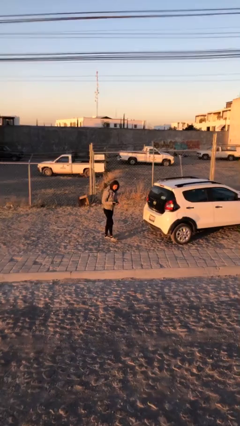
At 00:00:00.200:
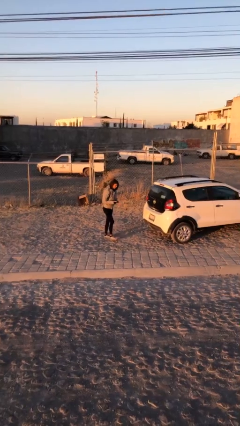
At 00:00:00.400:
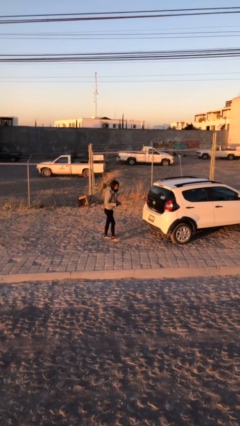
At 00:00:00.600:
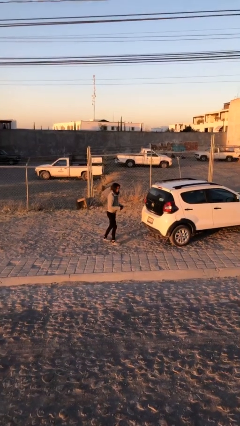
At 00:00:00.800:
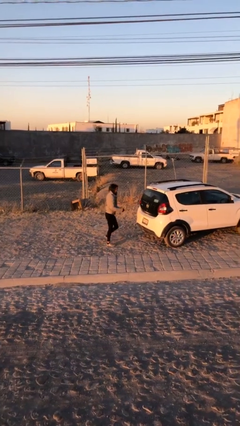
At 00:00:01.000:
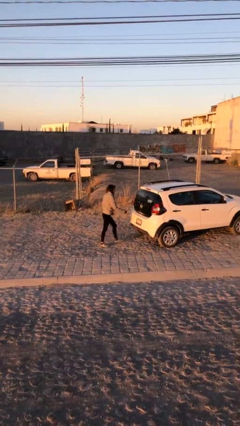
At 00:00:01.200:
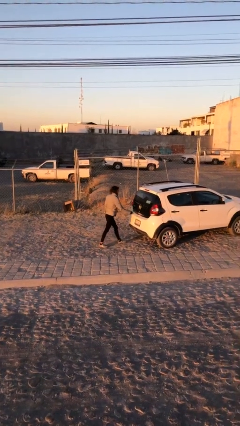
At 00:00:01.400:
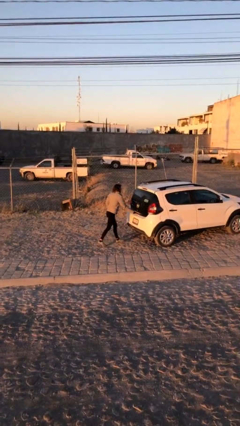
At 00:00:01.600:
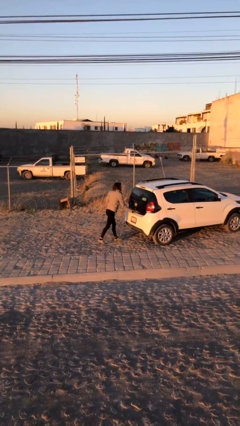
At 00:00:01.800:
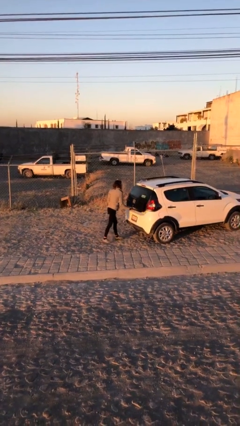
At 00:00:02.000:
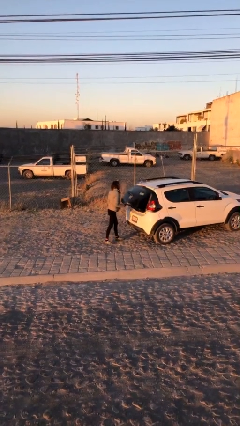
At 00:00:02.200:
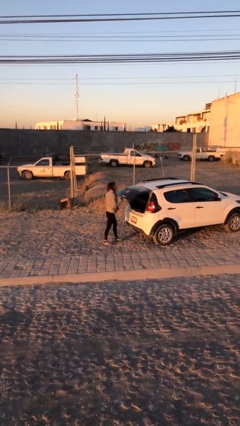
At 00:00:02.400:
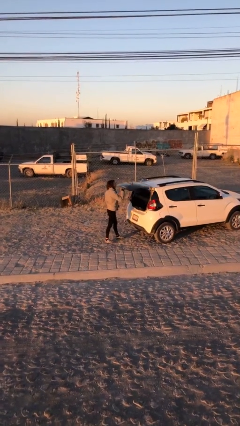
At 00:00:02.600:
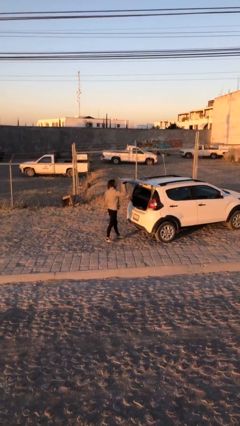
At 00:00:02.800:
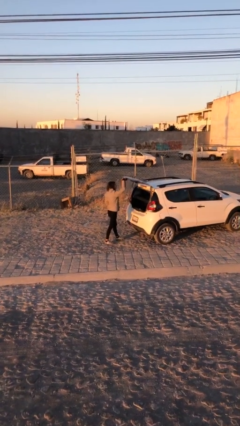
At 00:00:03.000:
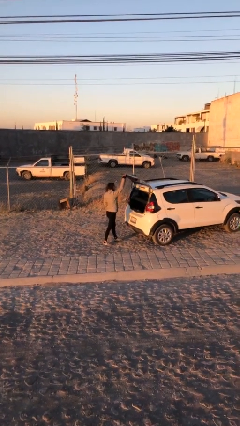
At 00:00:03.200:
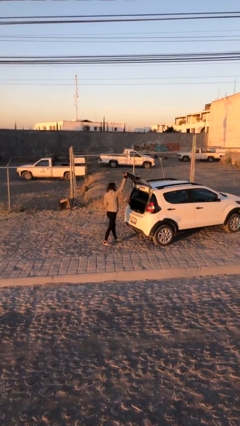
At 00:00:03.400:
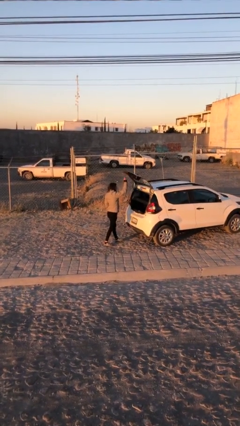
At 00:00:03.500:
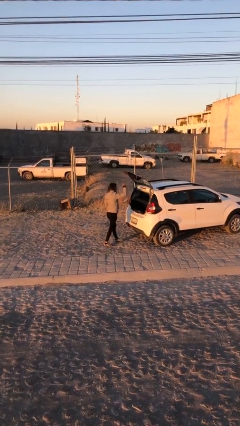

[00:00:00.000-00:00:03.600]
person opens car trunk

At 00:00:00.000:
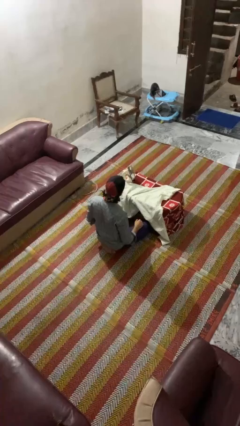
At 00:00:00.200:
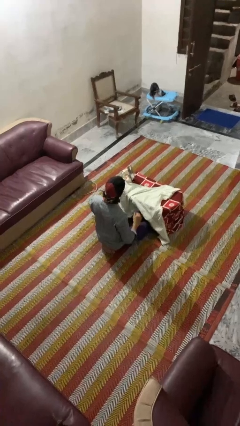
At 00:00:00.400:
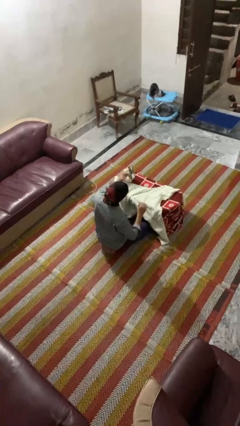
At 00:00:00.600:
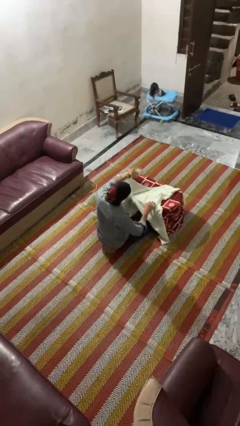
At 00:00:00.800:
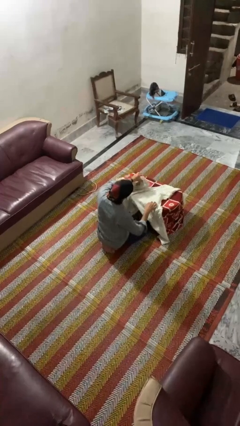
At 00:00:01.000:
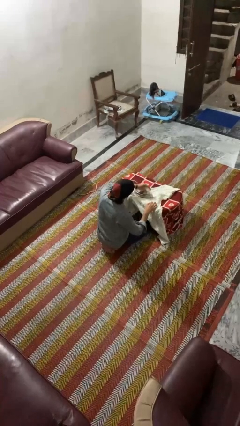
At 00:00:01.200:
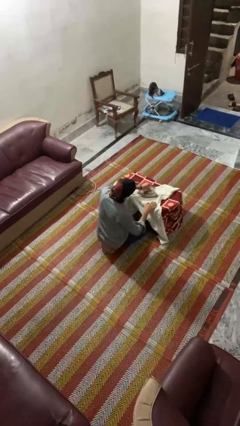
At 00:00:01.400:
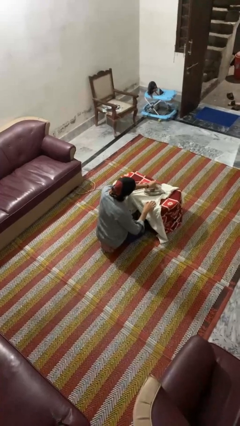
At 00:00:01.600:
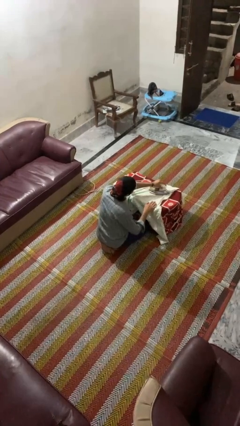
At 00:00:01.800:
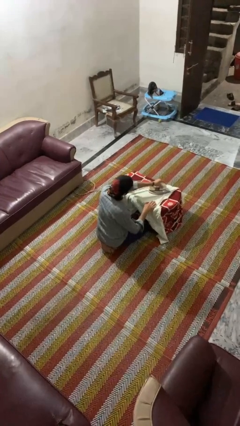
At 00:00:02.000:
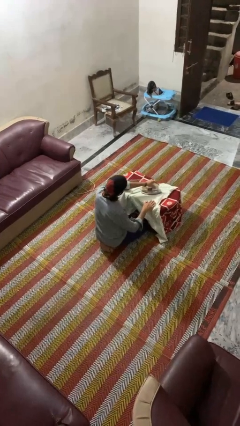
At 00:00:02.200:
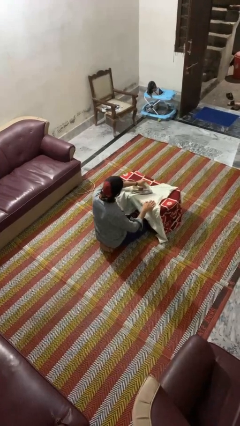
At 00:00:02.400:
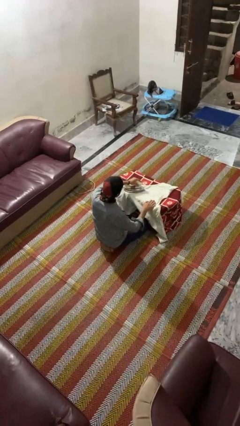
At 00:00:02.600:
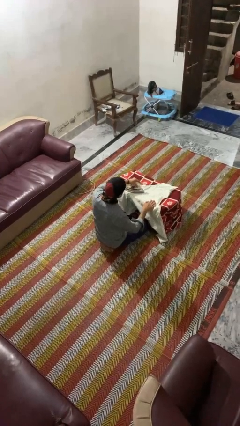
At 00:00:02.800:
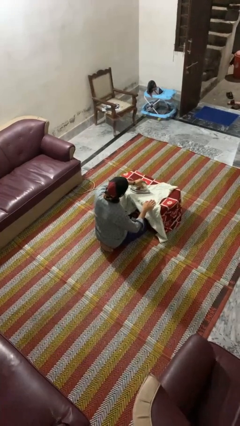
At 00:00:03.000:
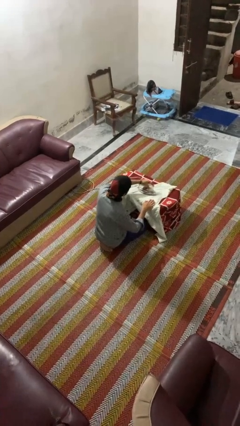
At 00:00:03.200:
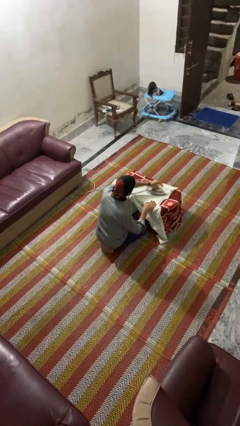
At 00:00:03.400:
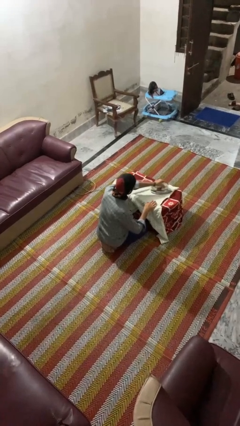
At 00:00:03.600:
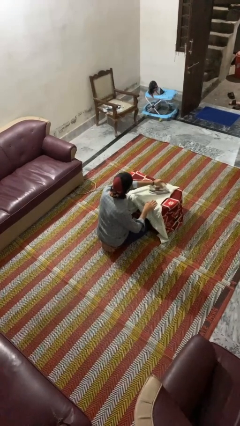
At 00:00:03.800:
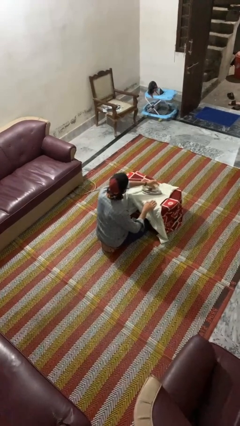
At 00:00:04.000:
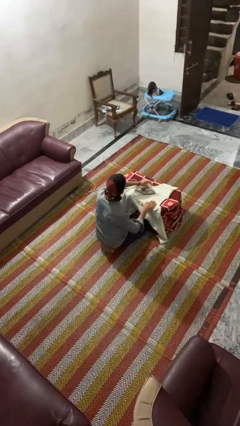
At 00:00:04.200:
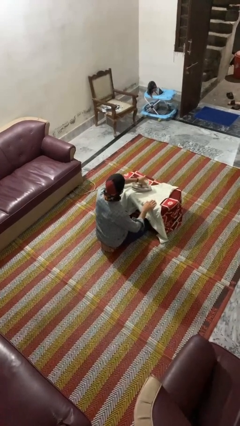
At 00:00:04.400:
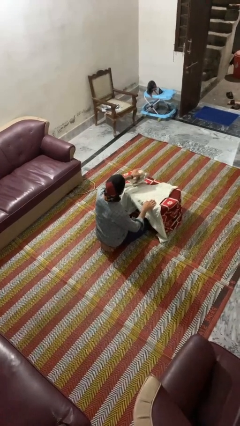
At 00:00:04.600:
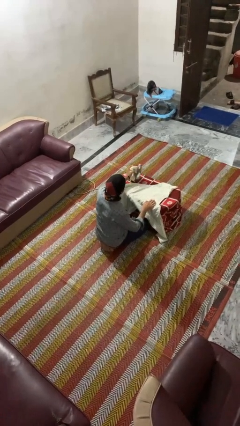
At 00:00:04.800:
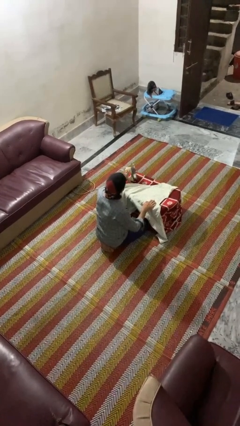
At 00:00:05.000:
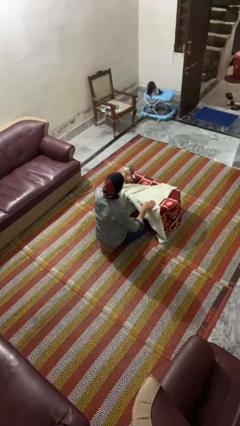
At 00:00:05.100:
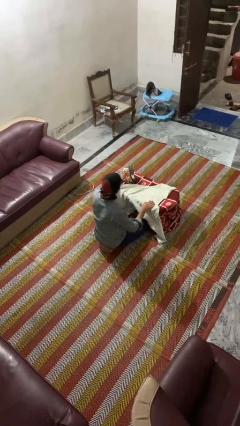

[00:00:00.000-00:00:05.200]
person irons clothes

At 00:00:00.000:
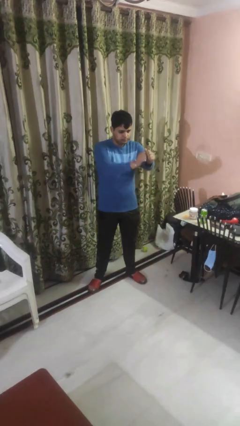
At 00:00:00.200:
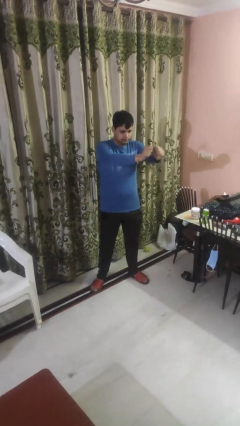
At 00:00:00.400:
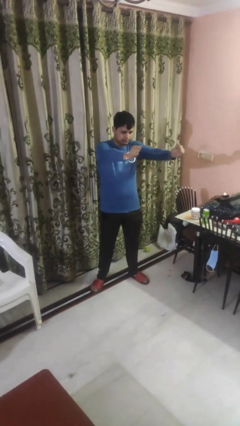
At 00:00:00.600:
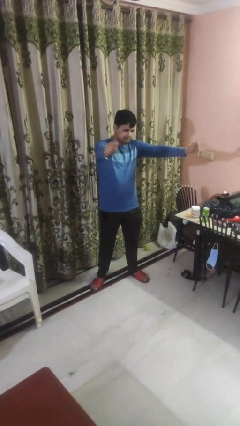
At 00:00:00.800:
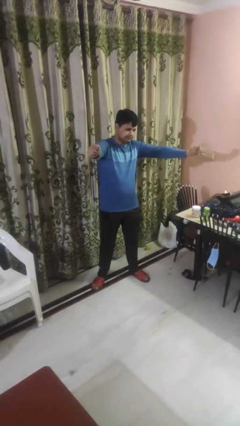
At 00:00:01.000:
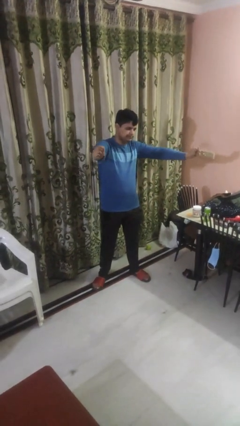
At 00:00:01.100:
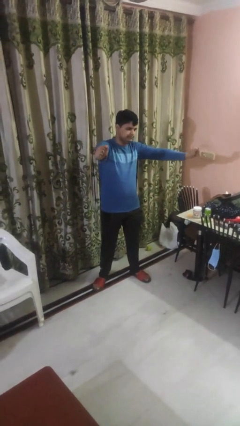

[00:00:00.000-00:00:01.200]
person gestures zoom in

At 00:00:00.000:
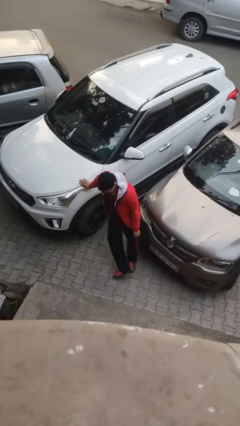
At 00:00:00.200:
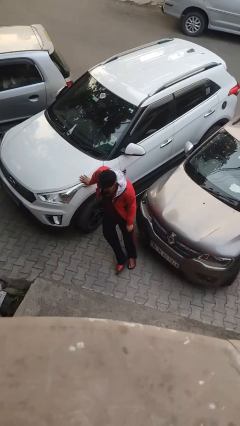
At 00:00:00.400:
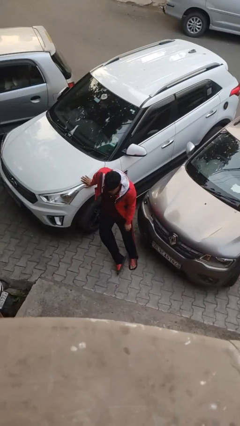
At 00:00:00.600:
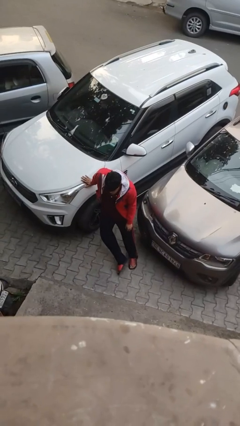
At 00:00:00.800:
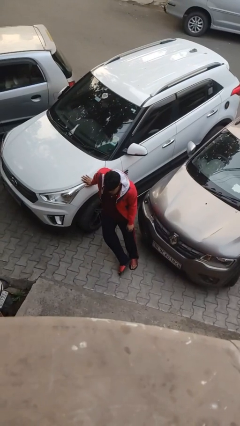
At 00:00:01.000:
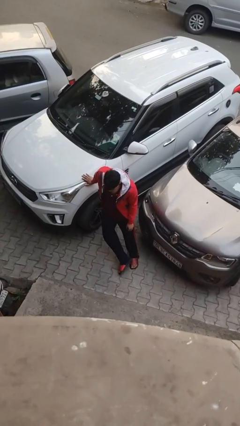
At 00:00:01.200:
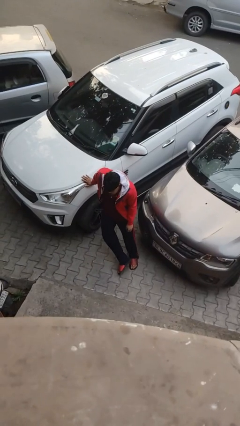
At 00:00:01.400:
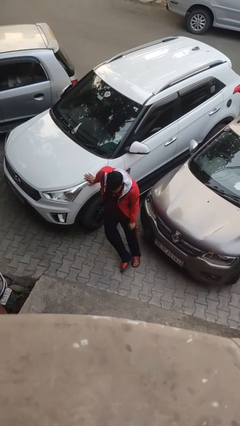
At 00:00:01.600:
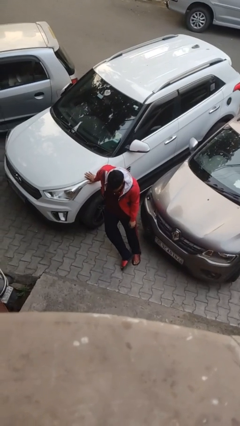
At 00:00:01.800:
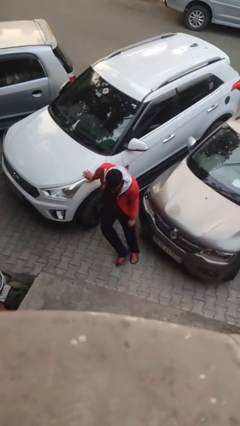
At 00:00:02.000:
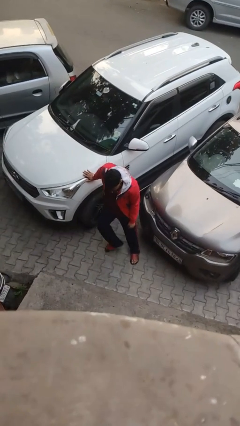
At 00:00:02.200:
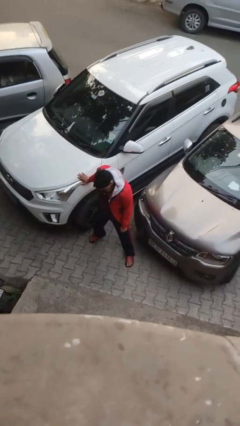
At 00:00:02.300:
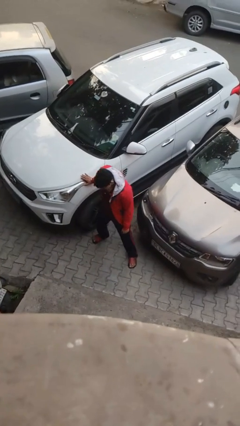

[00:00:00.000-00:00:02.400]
person leans against car

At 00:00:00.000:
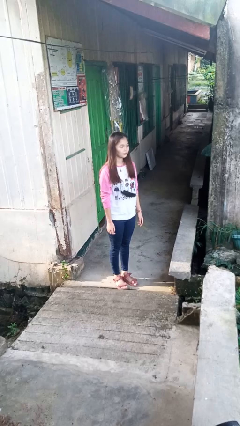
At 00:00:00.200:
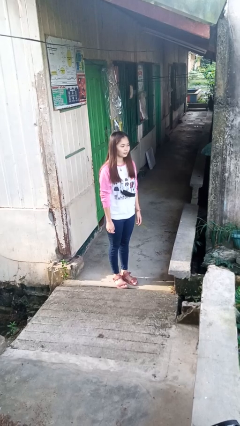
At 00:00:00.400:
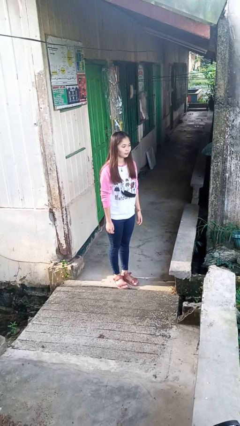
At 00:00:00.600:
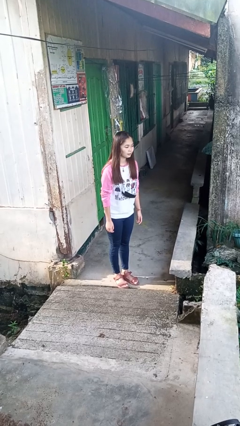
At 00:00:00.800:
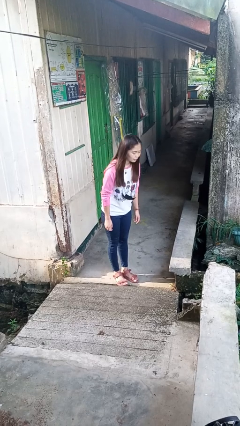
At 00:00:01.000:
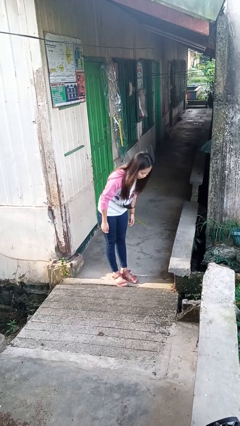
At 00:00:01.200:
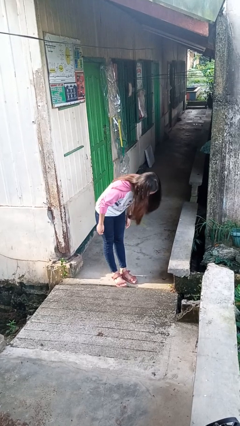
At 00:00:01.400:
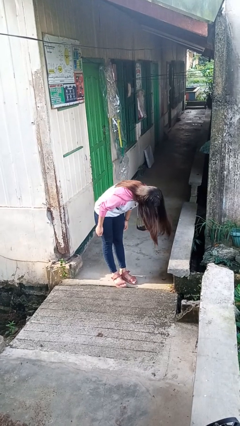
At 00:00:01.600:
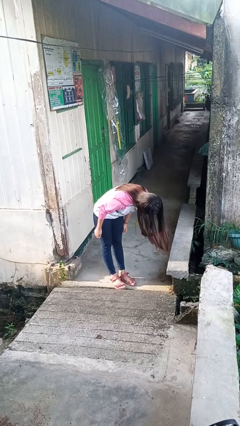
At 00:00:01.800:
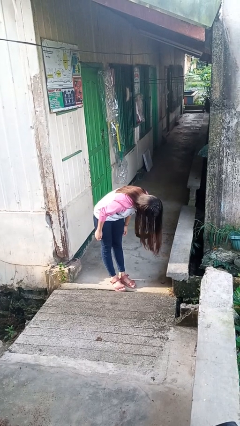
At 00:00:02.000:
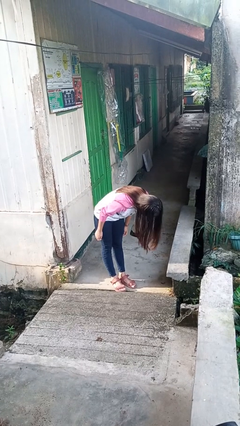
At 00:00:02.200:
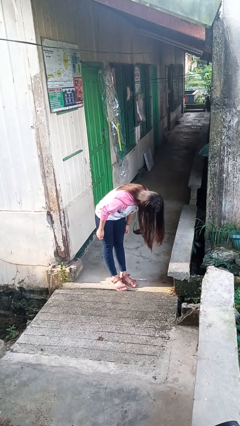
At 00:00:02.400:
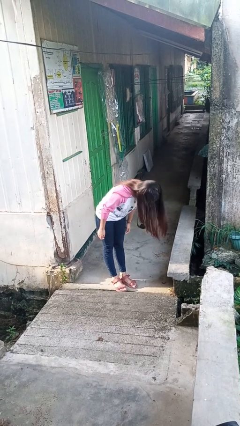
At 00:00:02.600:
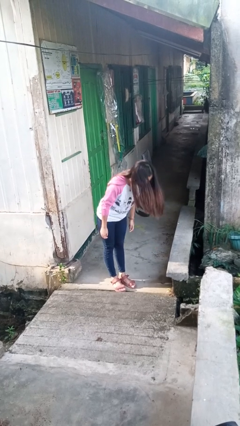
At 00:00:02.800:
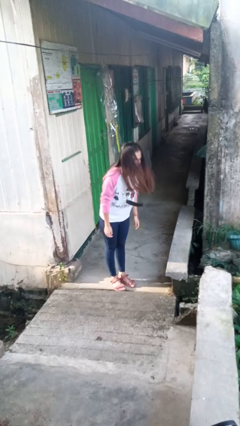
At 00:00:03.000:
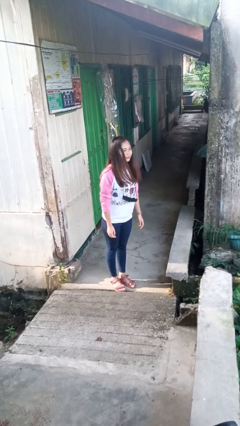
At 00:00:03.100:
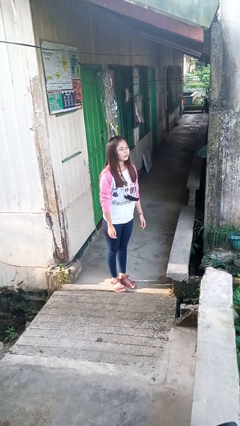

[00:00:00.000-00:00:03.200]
person bows

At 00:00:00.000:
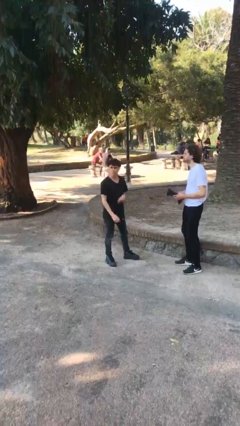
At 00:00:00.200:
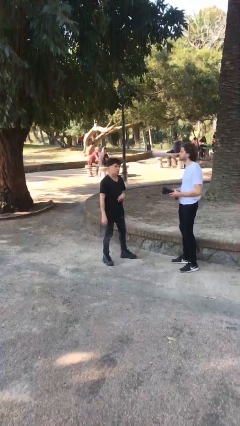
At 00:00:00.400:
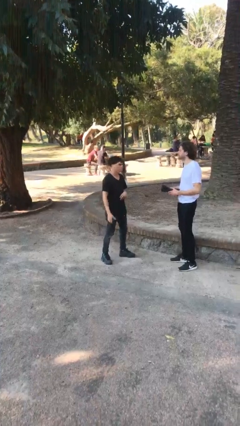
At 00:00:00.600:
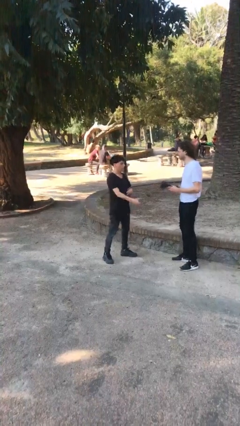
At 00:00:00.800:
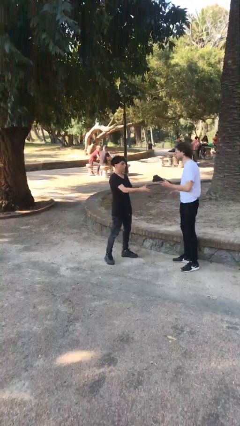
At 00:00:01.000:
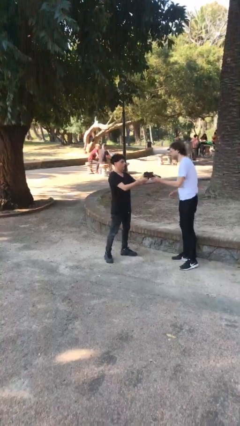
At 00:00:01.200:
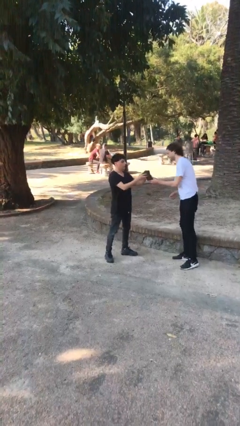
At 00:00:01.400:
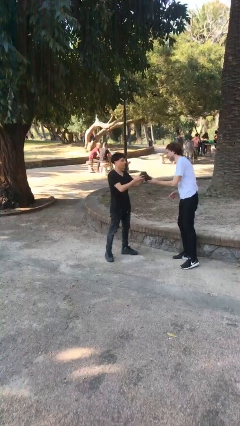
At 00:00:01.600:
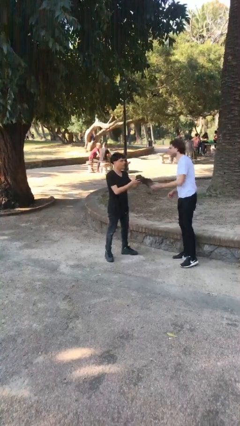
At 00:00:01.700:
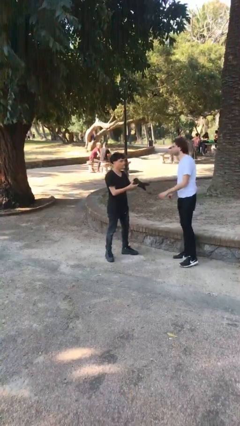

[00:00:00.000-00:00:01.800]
person transfers object to person
